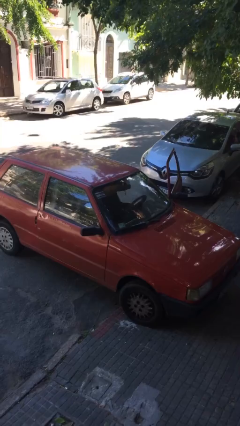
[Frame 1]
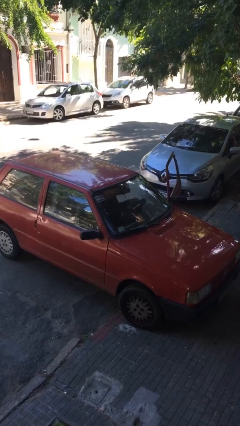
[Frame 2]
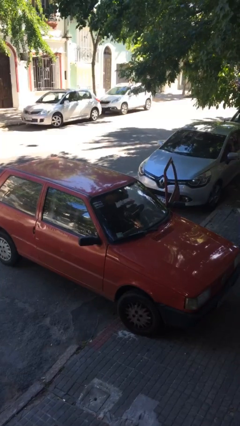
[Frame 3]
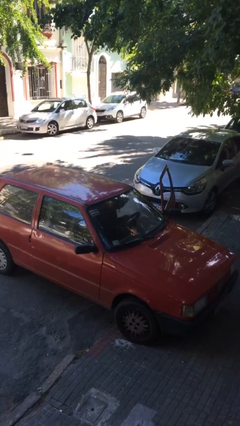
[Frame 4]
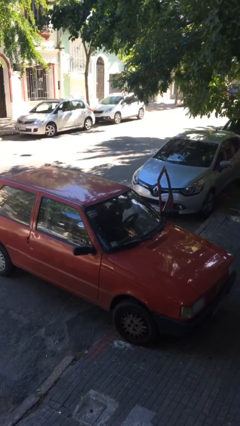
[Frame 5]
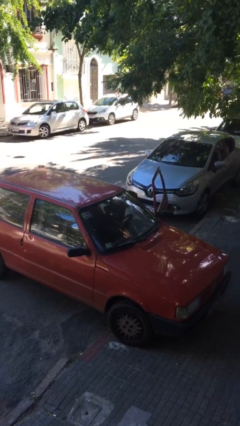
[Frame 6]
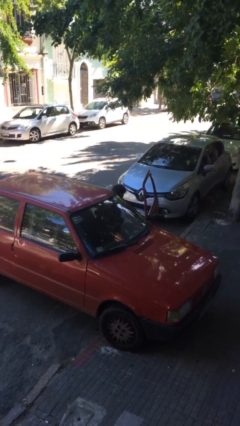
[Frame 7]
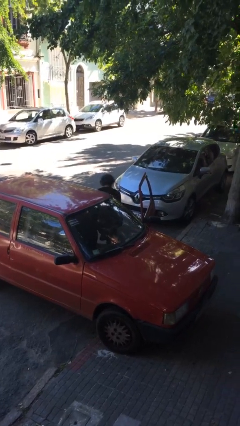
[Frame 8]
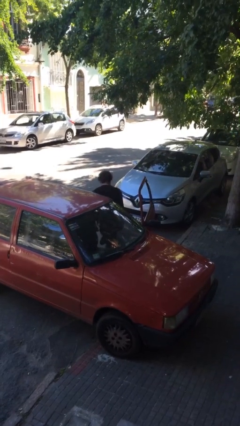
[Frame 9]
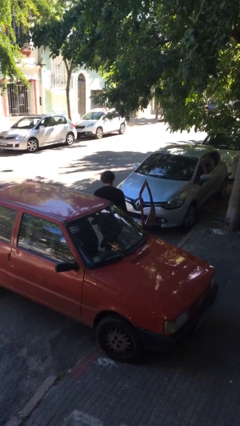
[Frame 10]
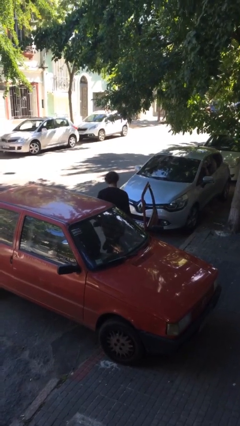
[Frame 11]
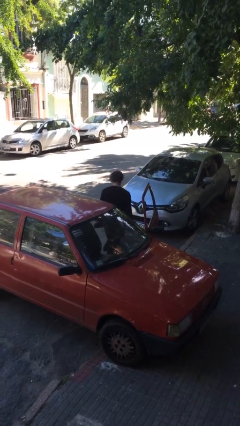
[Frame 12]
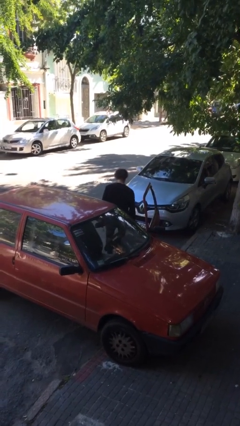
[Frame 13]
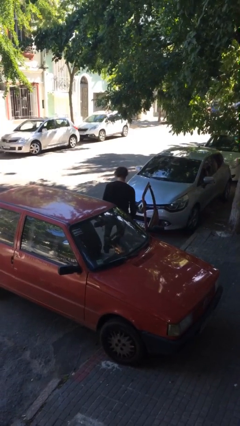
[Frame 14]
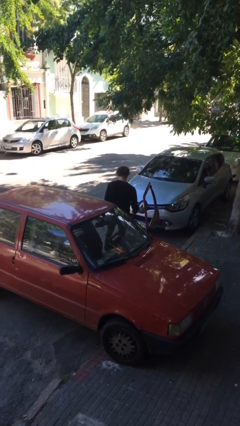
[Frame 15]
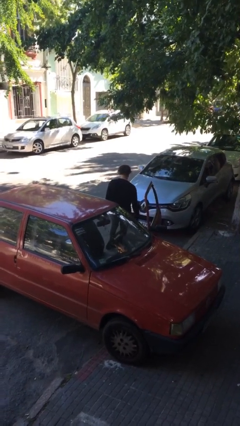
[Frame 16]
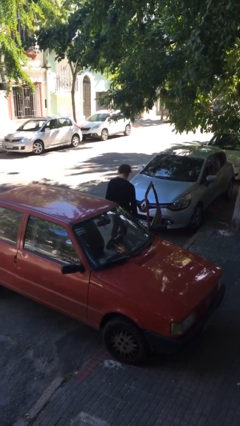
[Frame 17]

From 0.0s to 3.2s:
person exits car

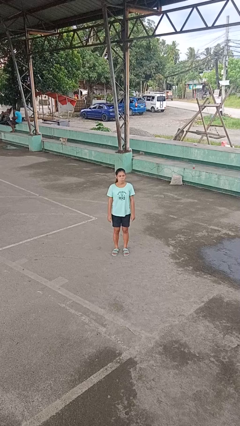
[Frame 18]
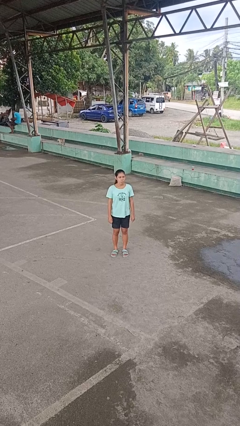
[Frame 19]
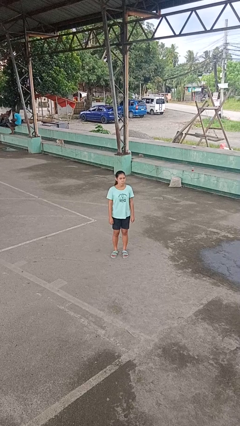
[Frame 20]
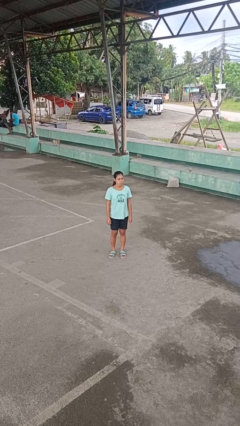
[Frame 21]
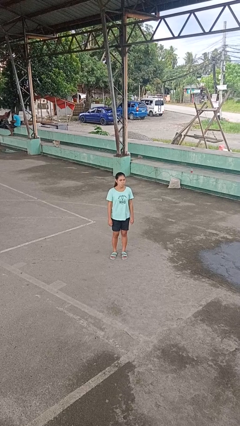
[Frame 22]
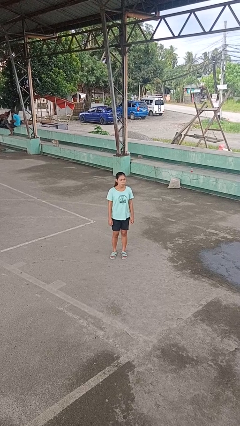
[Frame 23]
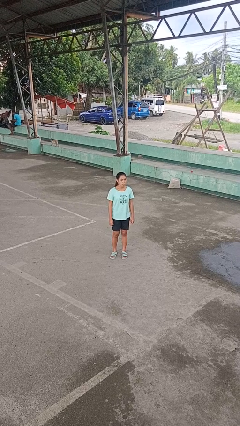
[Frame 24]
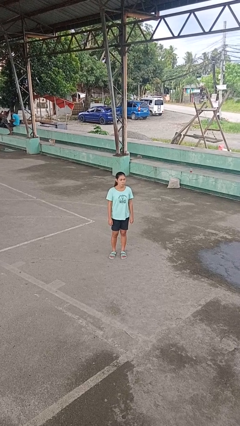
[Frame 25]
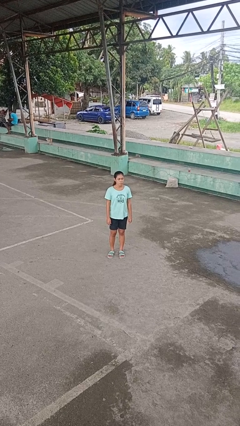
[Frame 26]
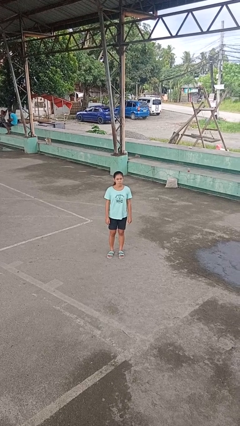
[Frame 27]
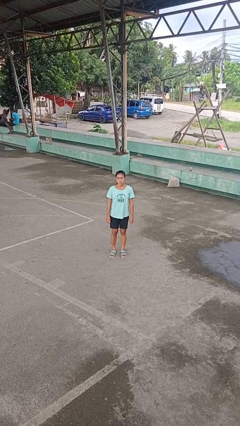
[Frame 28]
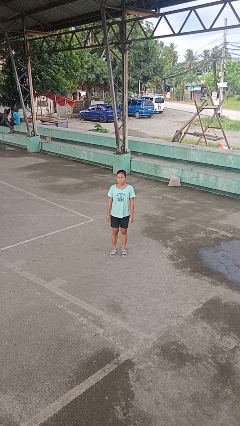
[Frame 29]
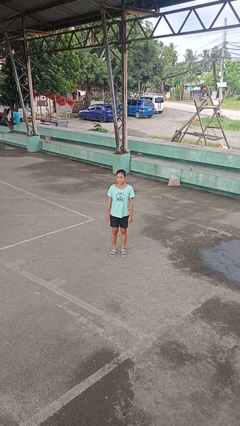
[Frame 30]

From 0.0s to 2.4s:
person sticks out tongue

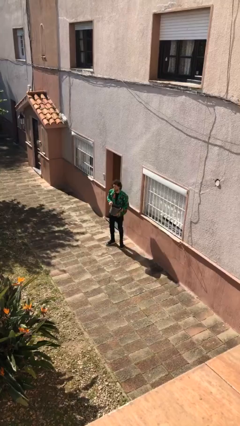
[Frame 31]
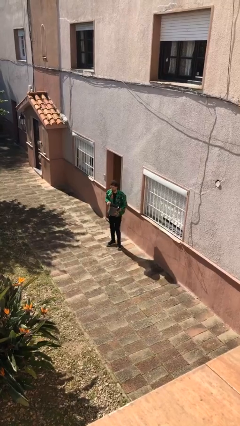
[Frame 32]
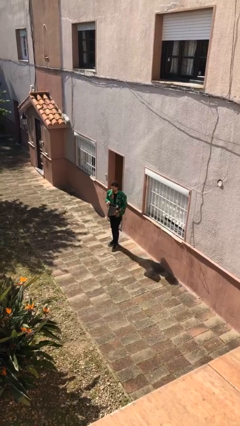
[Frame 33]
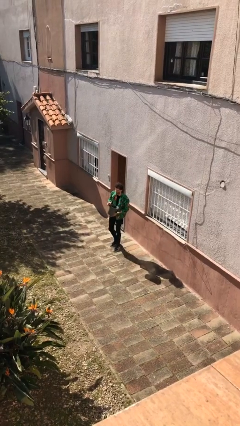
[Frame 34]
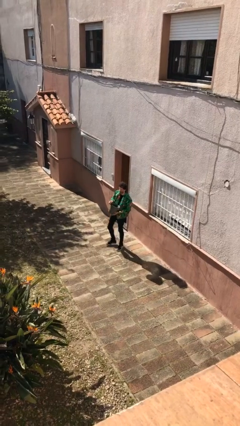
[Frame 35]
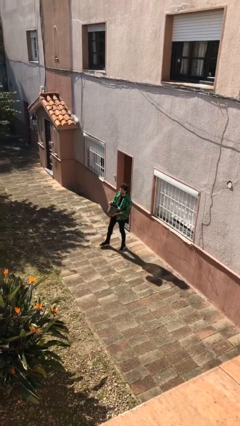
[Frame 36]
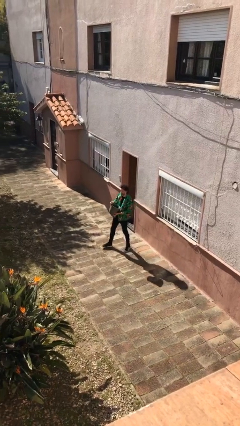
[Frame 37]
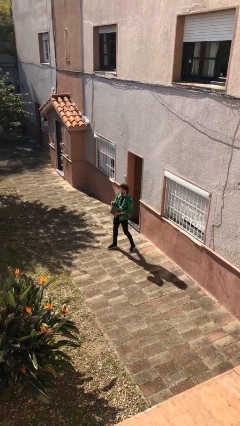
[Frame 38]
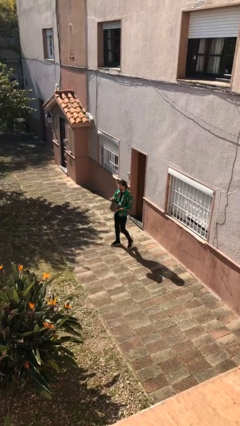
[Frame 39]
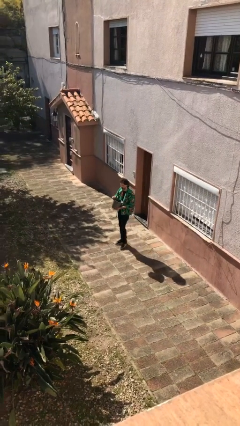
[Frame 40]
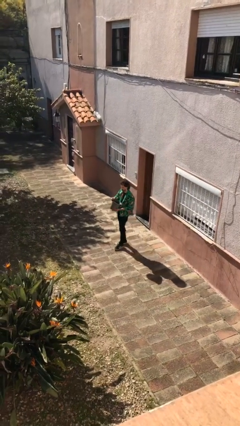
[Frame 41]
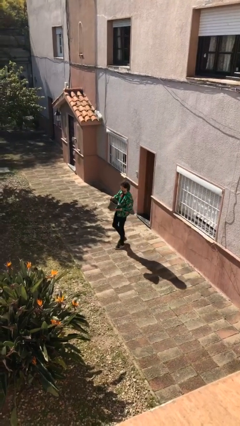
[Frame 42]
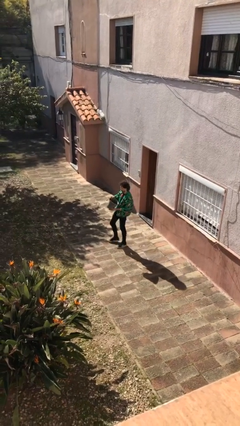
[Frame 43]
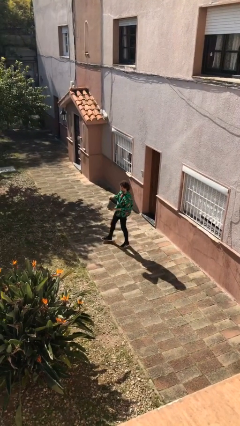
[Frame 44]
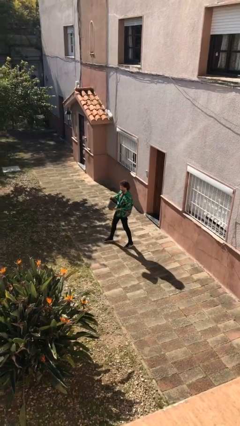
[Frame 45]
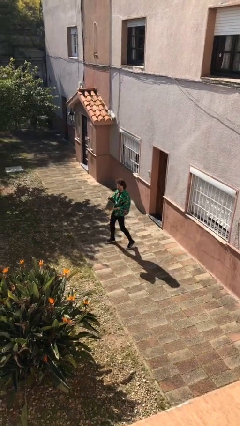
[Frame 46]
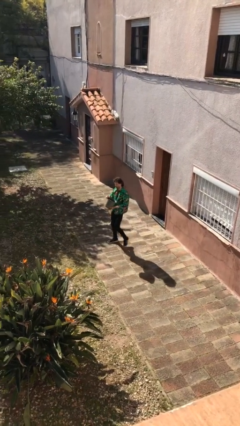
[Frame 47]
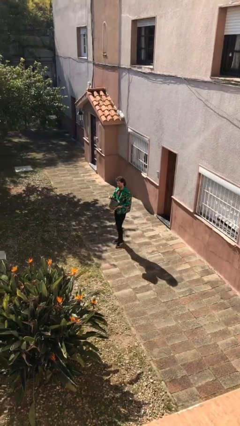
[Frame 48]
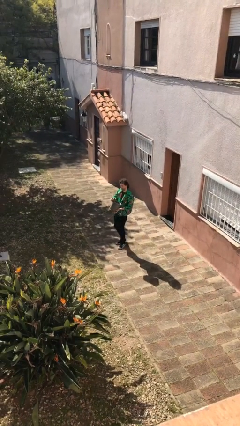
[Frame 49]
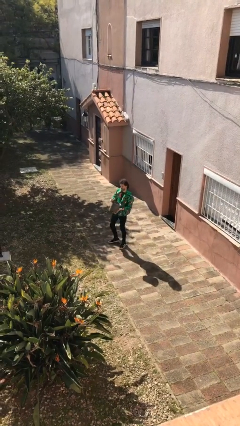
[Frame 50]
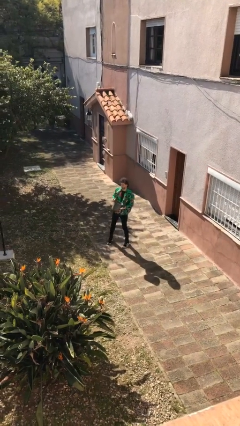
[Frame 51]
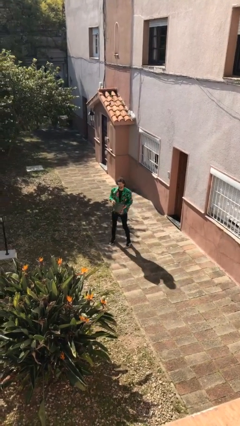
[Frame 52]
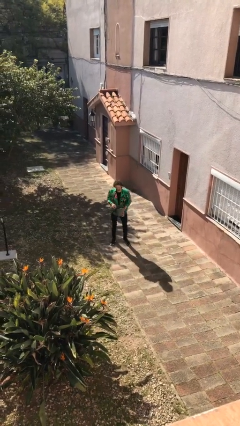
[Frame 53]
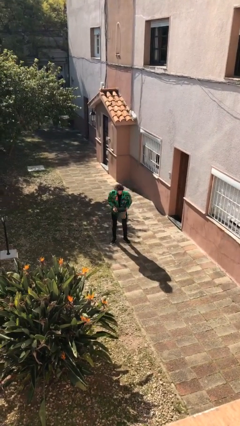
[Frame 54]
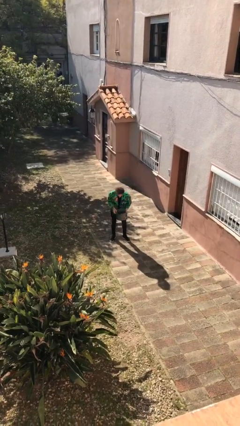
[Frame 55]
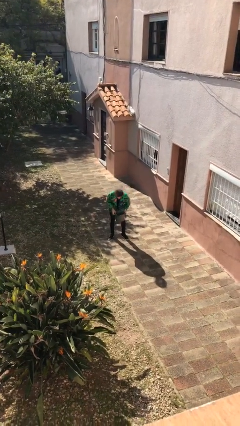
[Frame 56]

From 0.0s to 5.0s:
person carries heavy object

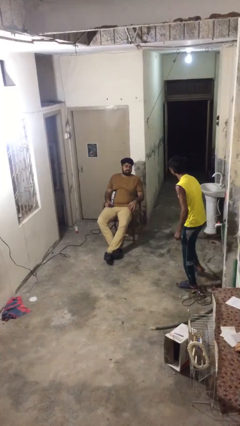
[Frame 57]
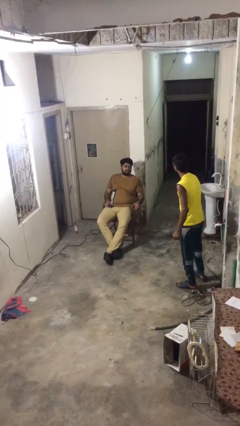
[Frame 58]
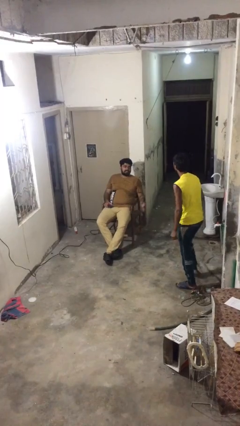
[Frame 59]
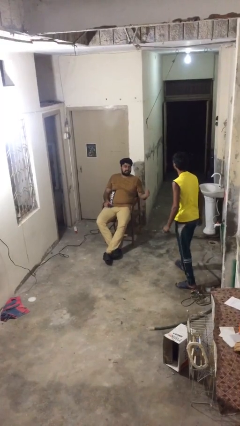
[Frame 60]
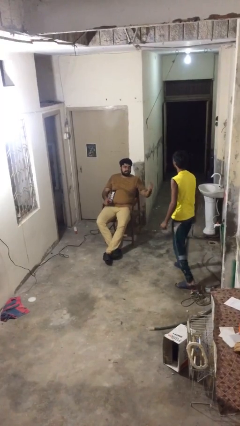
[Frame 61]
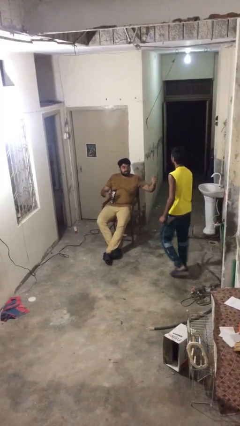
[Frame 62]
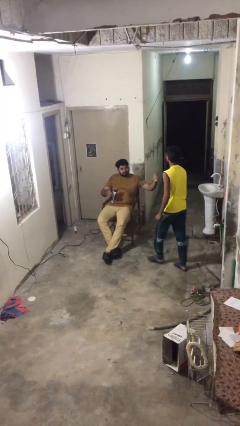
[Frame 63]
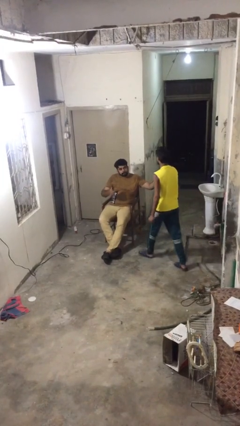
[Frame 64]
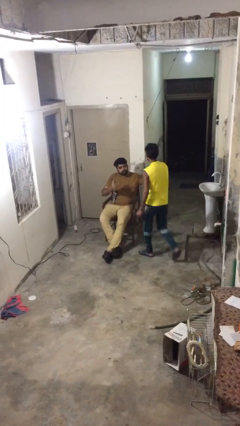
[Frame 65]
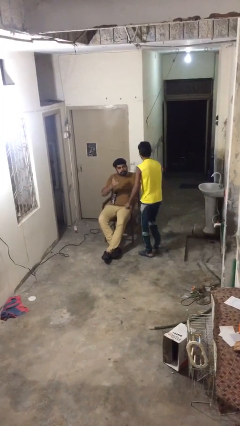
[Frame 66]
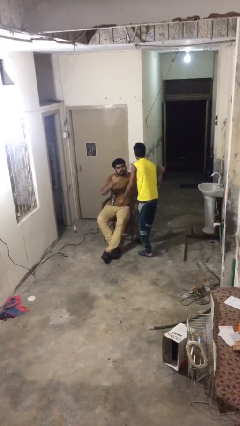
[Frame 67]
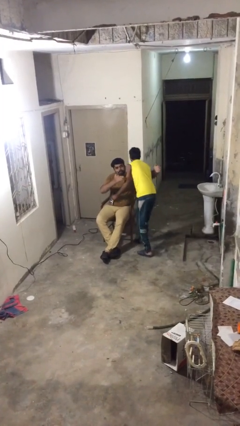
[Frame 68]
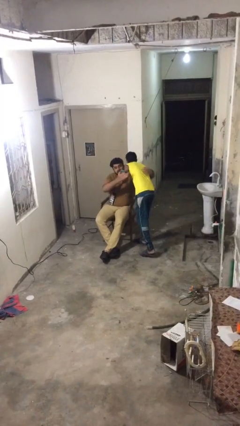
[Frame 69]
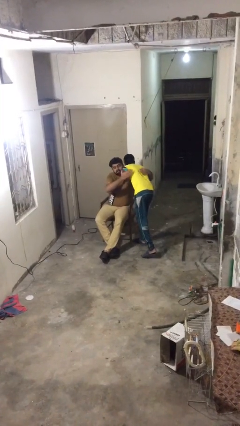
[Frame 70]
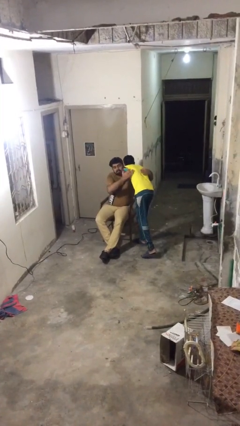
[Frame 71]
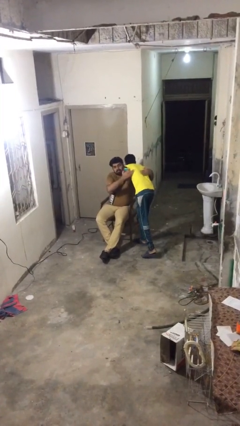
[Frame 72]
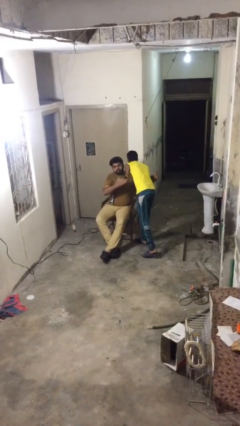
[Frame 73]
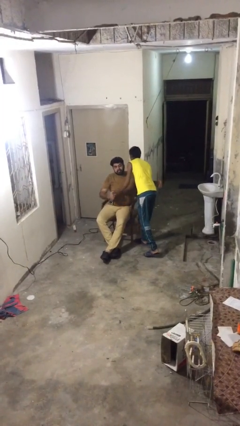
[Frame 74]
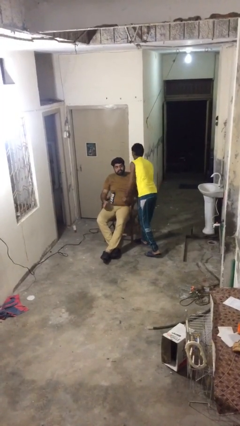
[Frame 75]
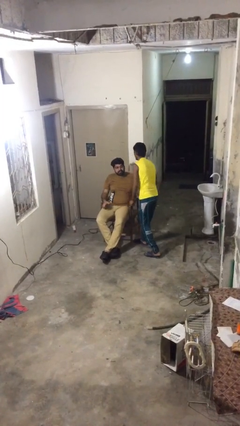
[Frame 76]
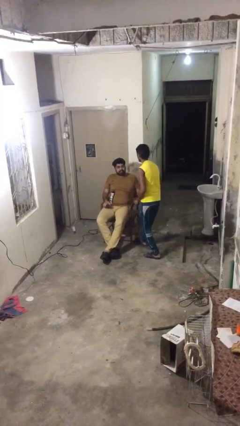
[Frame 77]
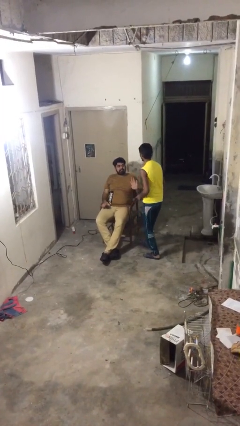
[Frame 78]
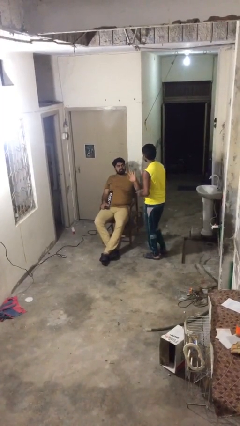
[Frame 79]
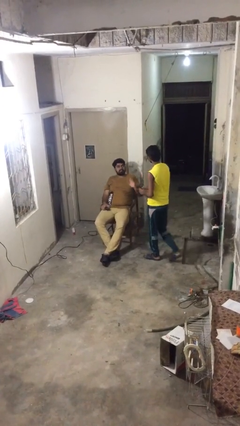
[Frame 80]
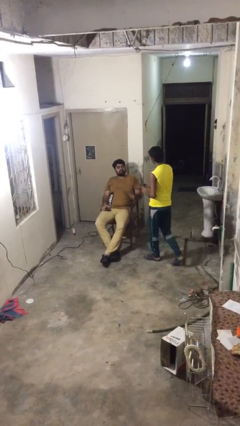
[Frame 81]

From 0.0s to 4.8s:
person embraces person

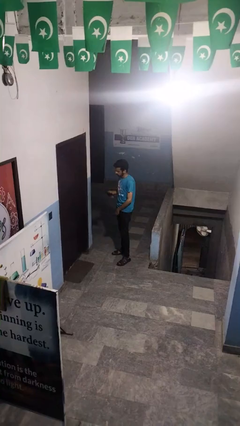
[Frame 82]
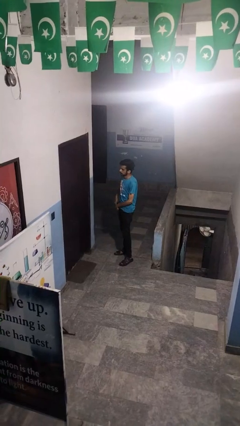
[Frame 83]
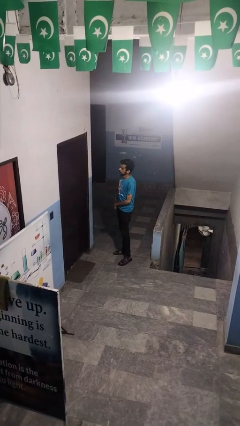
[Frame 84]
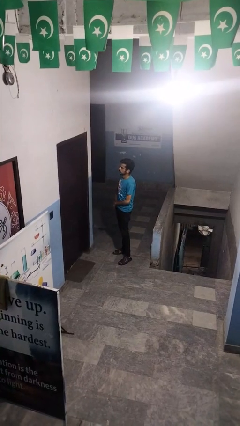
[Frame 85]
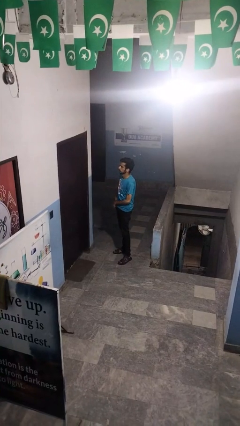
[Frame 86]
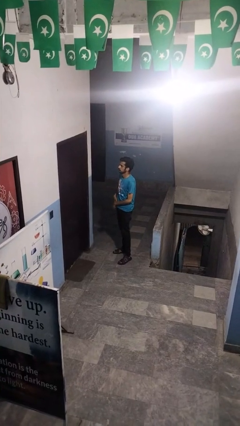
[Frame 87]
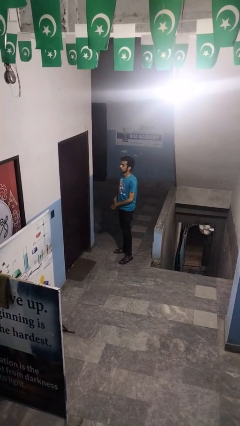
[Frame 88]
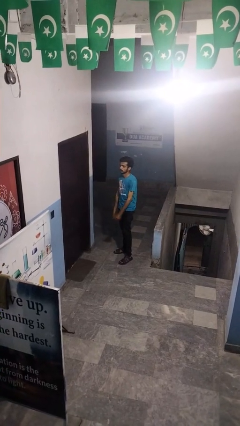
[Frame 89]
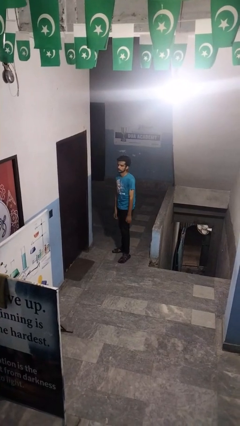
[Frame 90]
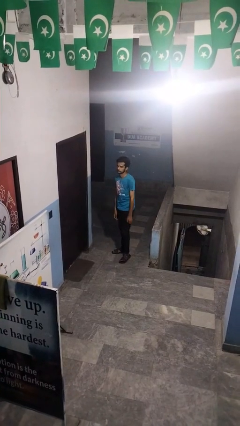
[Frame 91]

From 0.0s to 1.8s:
person puts phone into pocket
